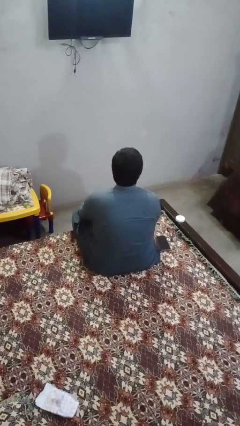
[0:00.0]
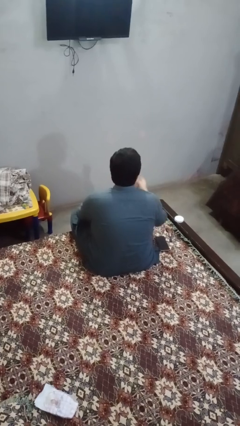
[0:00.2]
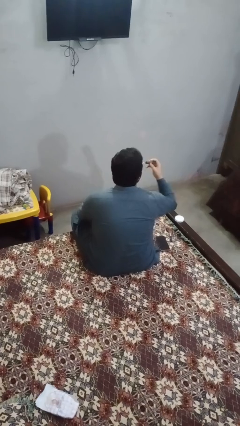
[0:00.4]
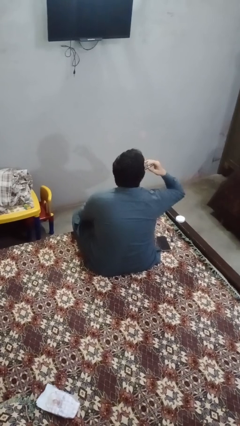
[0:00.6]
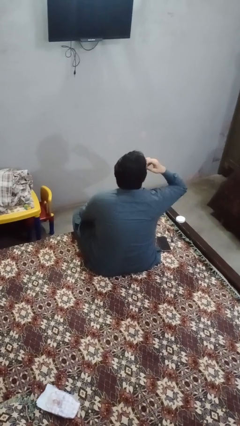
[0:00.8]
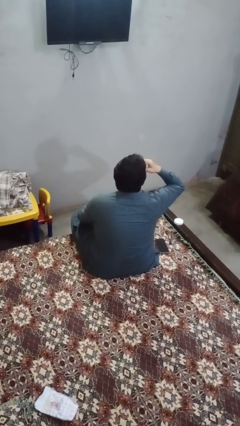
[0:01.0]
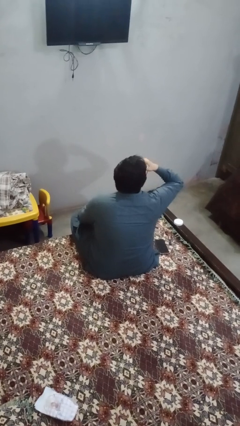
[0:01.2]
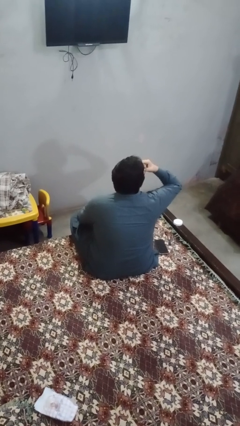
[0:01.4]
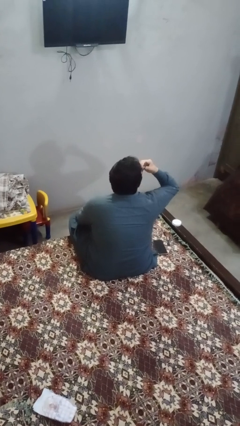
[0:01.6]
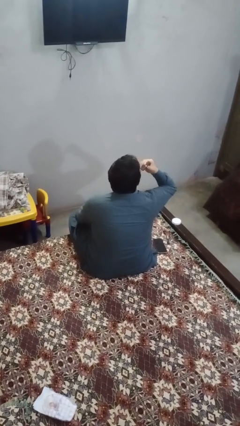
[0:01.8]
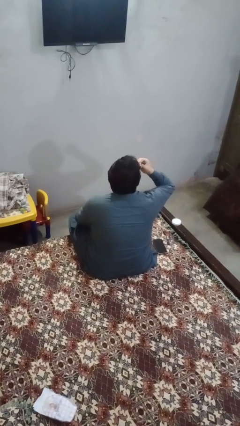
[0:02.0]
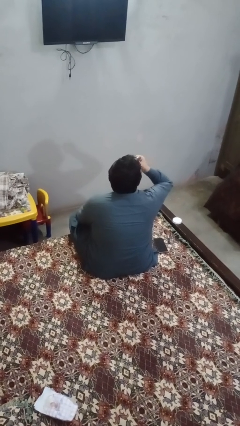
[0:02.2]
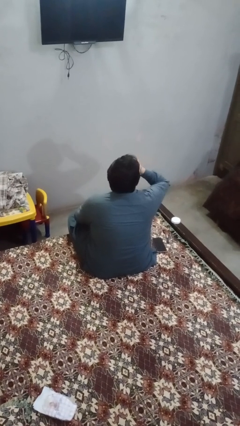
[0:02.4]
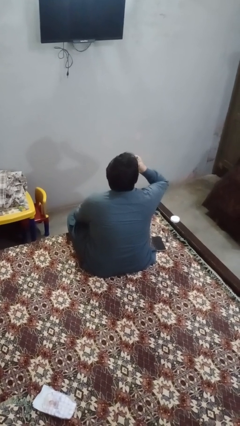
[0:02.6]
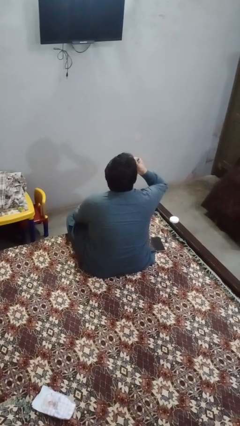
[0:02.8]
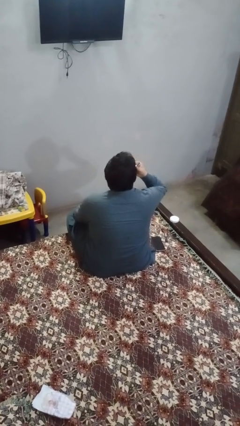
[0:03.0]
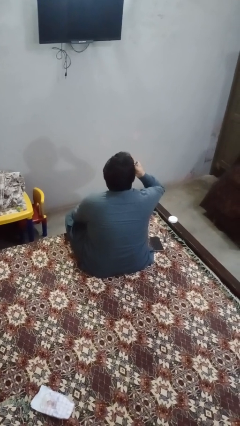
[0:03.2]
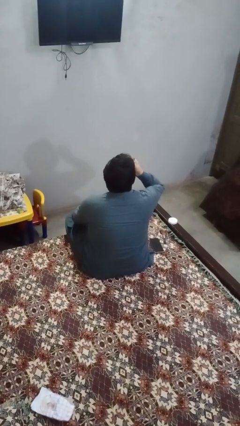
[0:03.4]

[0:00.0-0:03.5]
person applies lip makeup

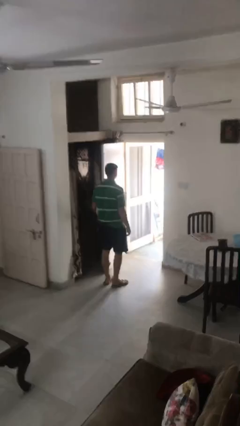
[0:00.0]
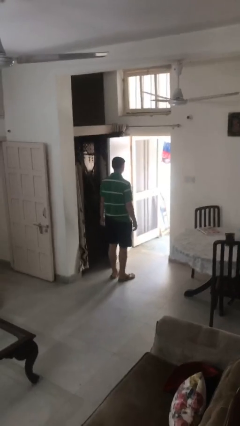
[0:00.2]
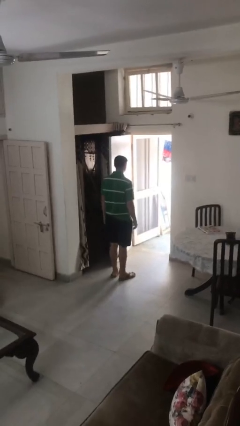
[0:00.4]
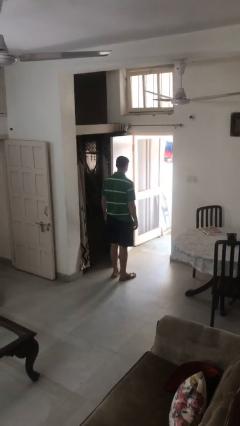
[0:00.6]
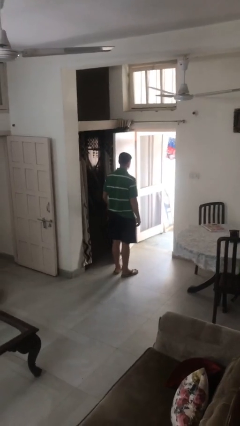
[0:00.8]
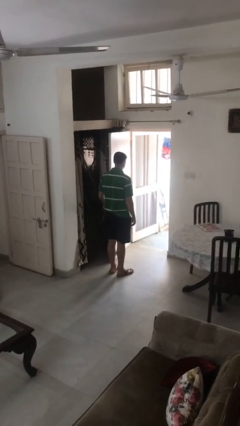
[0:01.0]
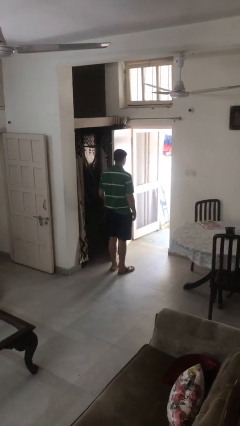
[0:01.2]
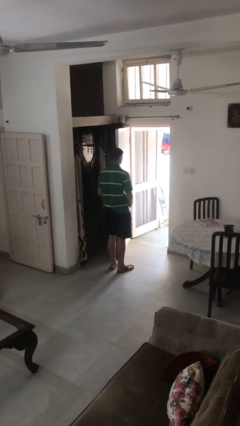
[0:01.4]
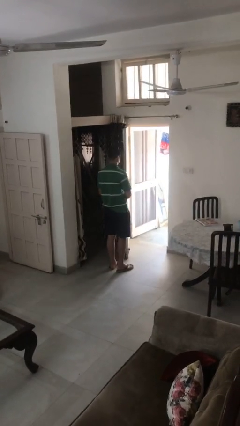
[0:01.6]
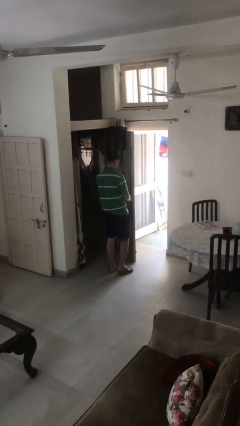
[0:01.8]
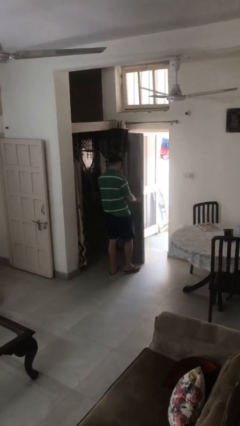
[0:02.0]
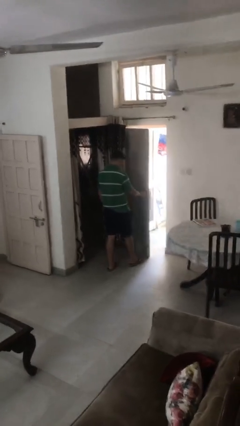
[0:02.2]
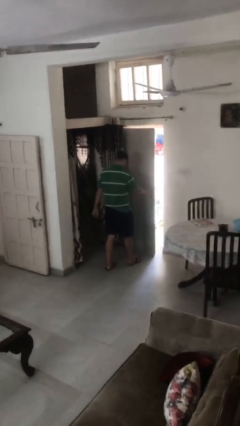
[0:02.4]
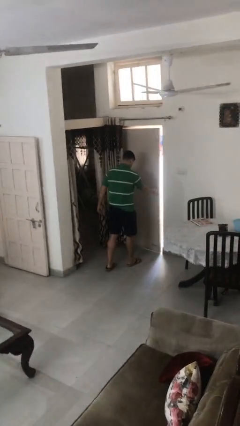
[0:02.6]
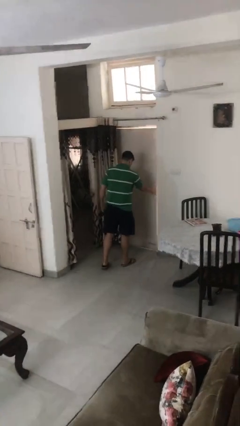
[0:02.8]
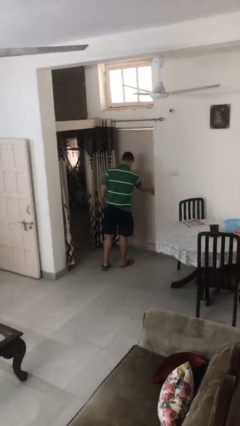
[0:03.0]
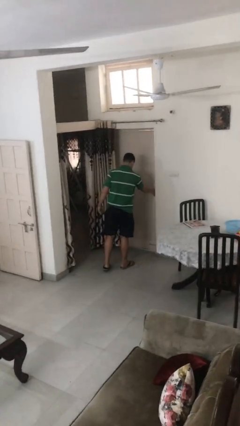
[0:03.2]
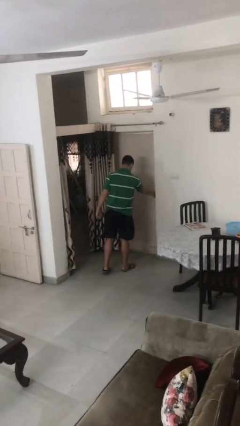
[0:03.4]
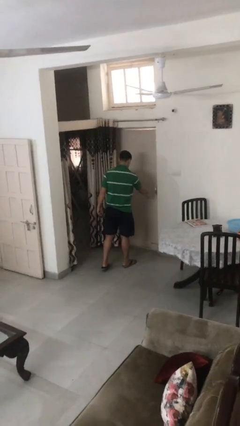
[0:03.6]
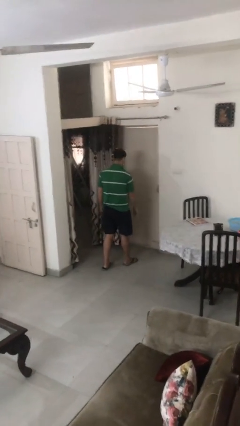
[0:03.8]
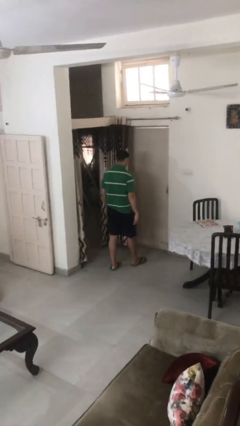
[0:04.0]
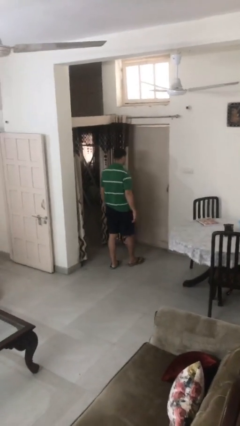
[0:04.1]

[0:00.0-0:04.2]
person closes facility door

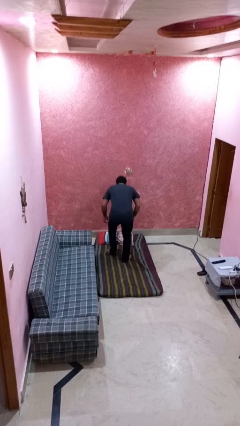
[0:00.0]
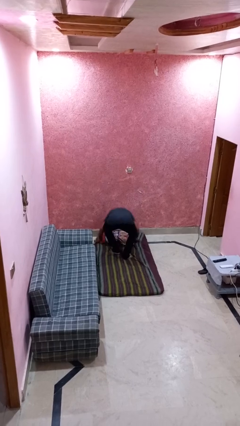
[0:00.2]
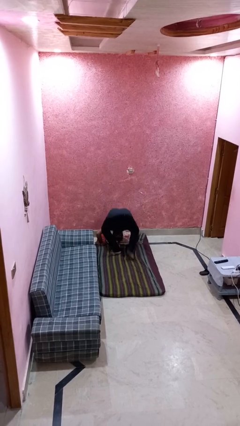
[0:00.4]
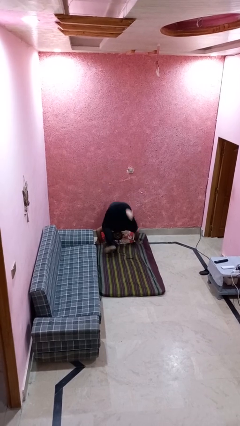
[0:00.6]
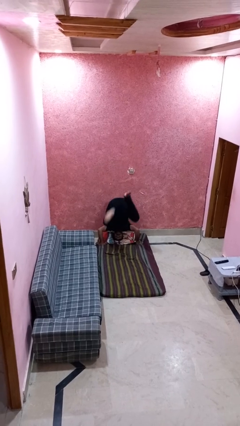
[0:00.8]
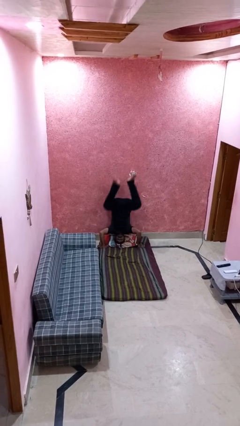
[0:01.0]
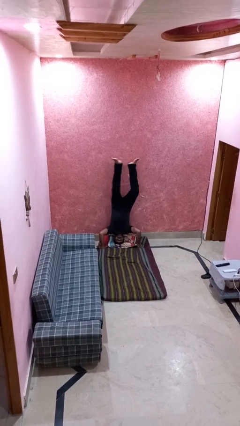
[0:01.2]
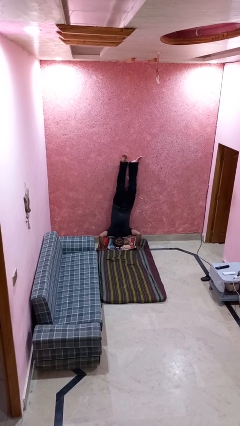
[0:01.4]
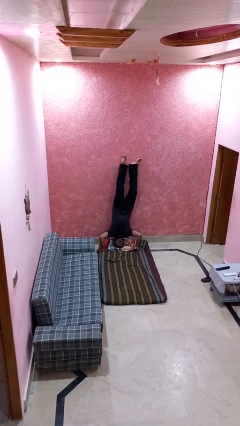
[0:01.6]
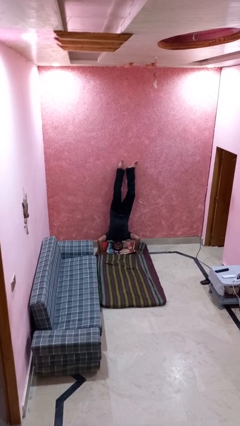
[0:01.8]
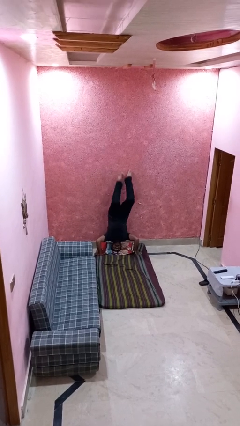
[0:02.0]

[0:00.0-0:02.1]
person handstand

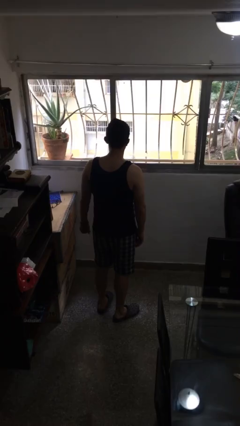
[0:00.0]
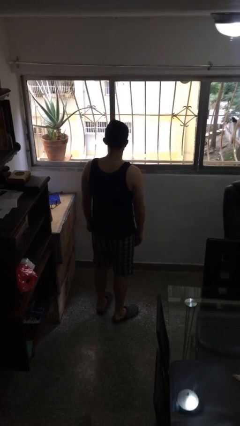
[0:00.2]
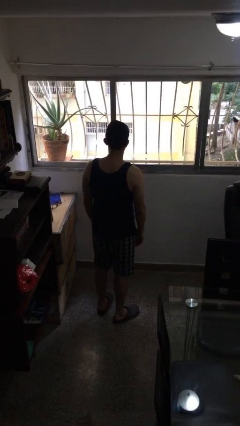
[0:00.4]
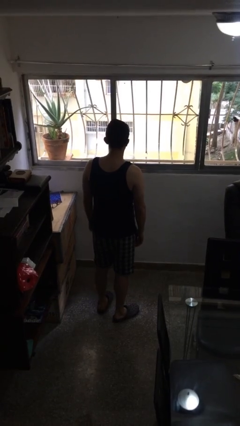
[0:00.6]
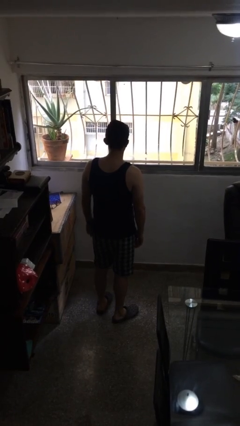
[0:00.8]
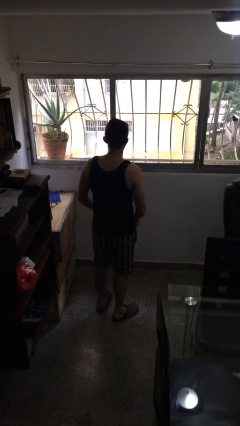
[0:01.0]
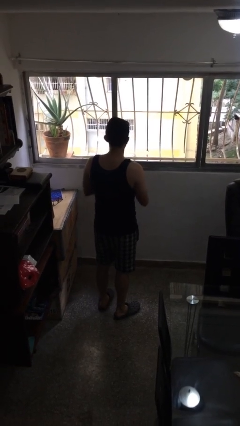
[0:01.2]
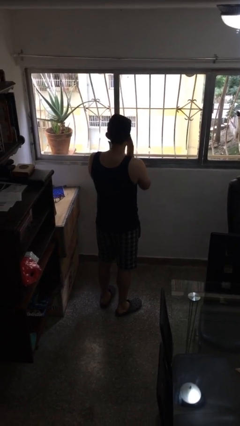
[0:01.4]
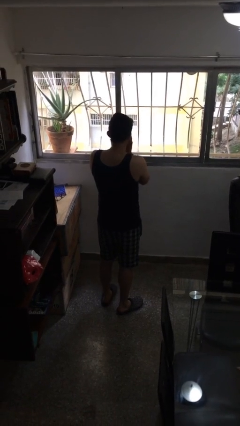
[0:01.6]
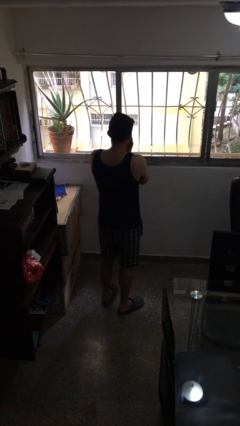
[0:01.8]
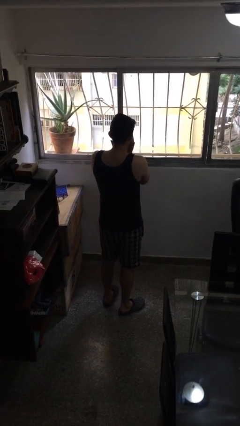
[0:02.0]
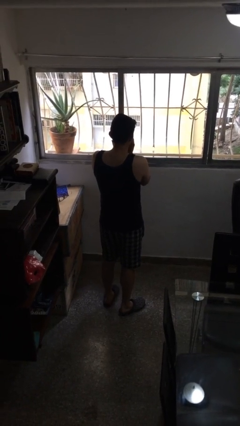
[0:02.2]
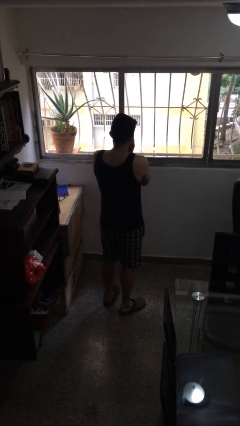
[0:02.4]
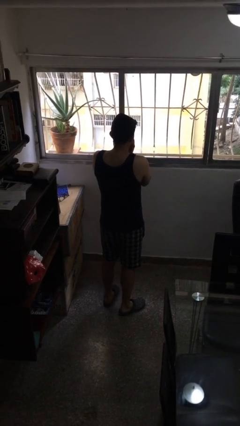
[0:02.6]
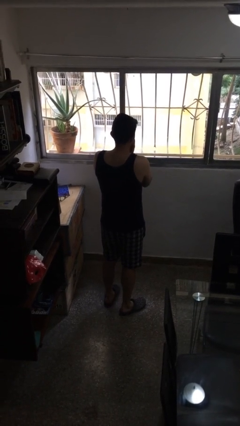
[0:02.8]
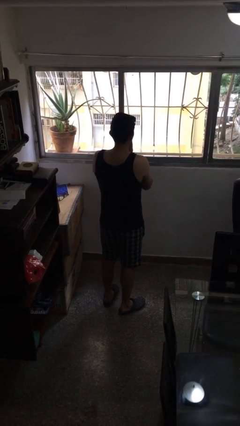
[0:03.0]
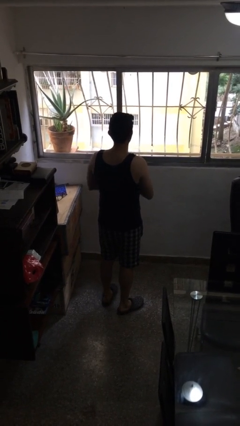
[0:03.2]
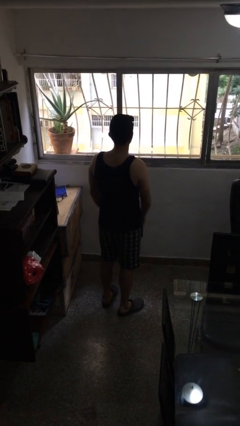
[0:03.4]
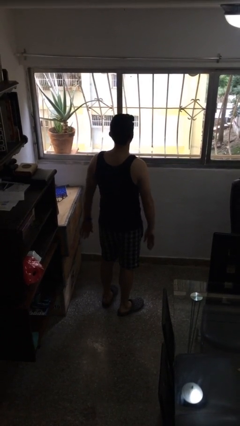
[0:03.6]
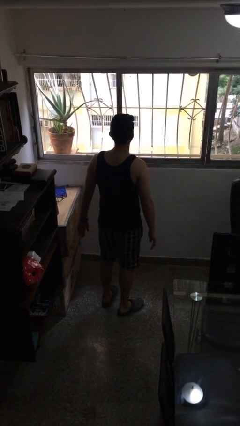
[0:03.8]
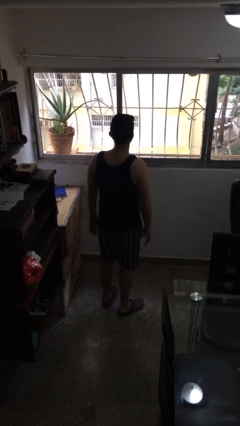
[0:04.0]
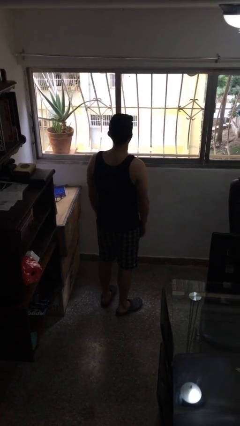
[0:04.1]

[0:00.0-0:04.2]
person rubs eyes

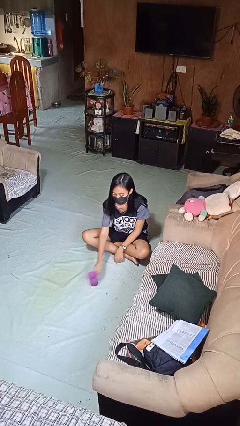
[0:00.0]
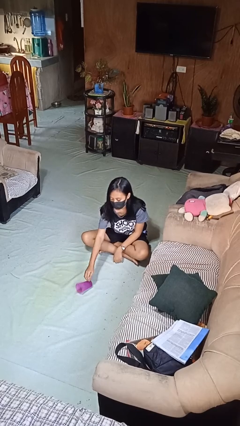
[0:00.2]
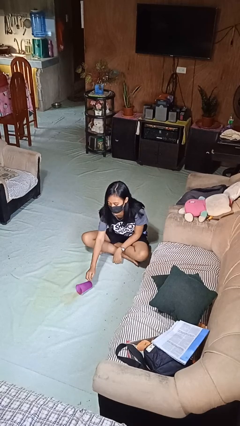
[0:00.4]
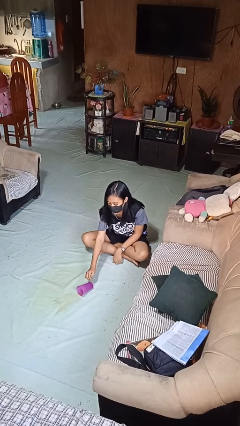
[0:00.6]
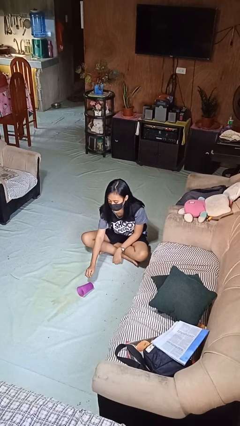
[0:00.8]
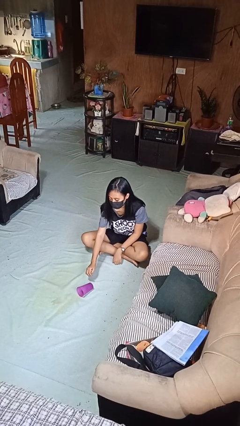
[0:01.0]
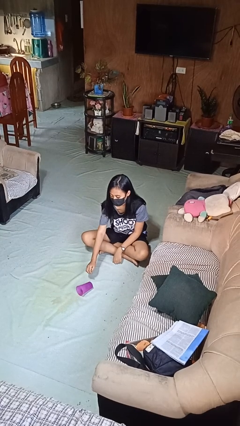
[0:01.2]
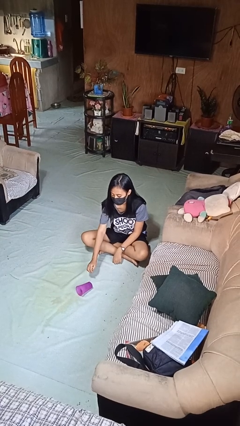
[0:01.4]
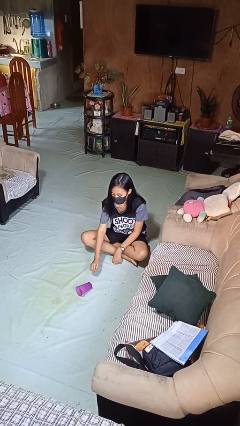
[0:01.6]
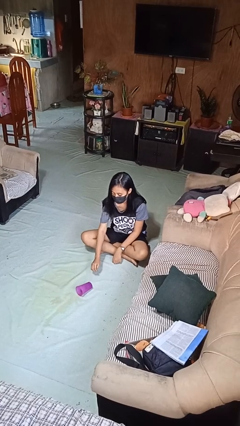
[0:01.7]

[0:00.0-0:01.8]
person spills on floor

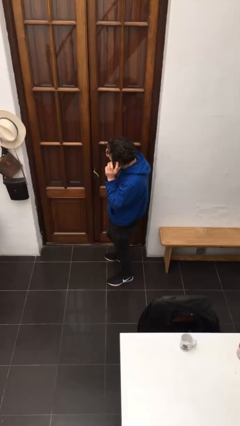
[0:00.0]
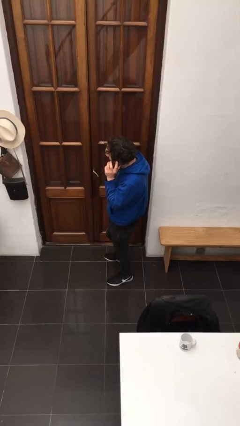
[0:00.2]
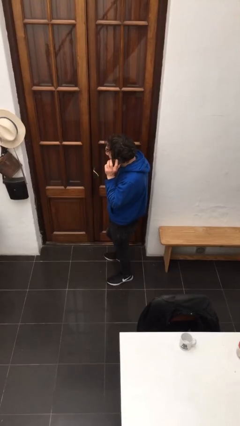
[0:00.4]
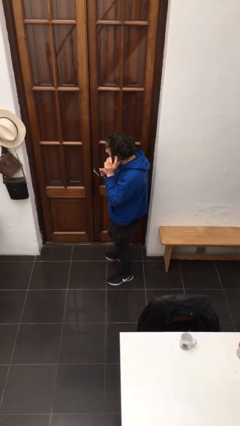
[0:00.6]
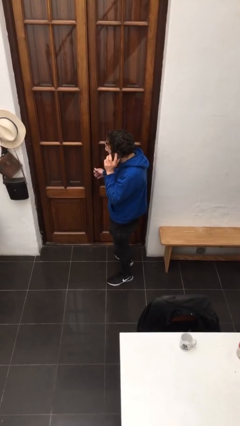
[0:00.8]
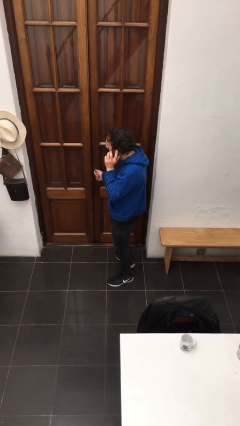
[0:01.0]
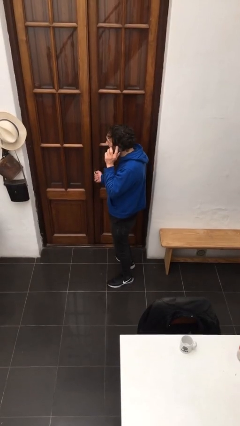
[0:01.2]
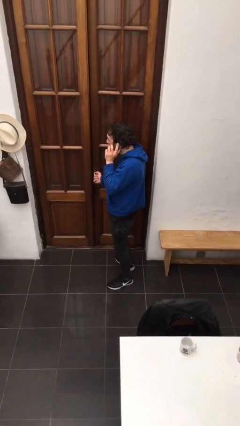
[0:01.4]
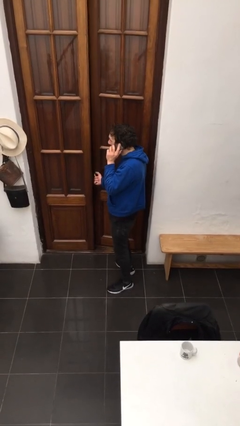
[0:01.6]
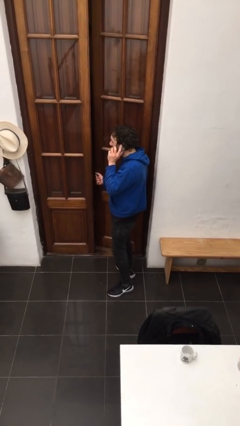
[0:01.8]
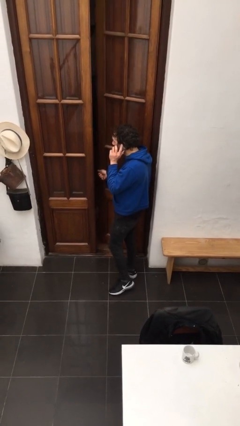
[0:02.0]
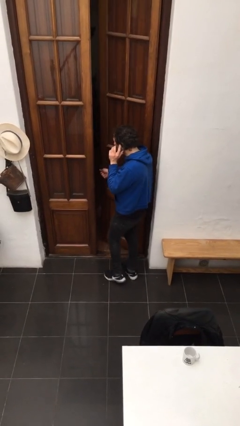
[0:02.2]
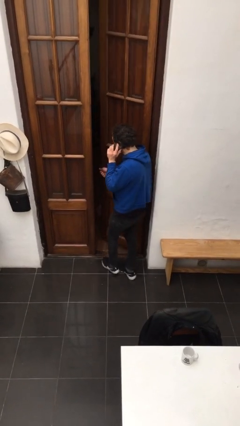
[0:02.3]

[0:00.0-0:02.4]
person opens facility door
